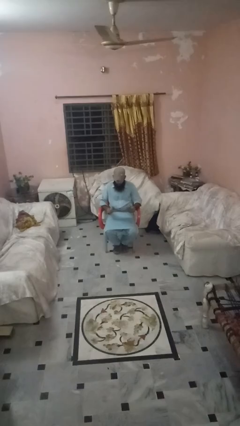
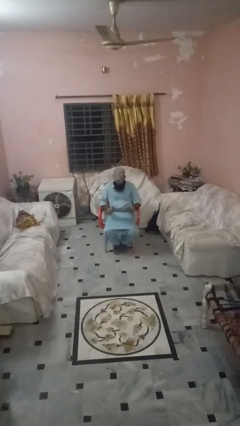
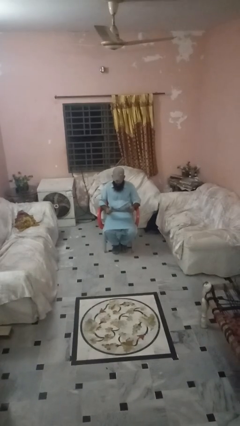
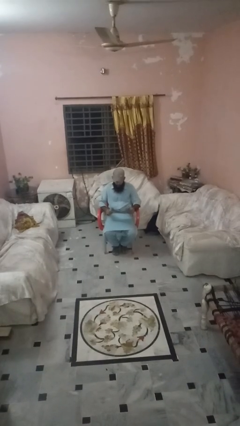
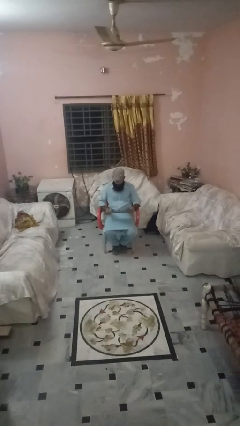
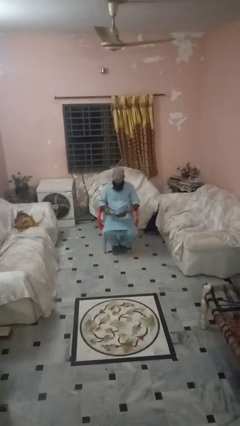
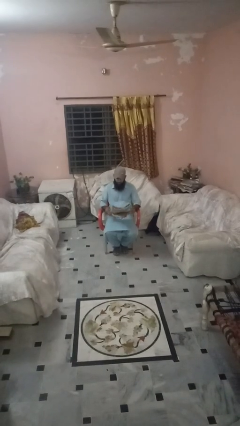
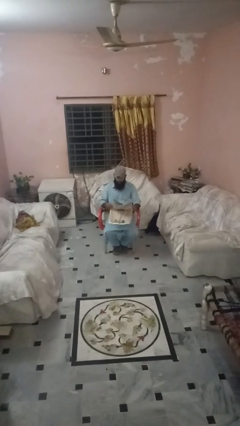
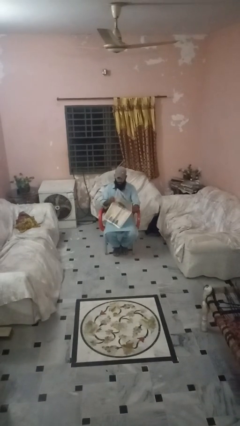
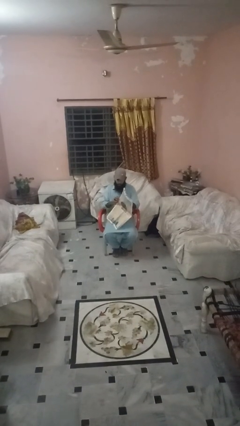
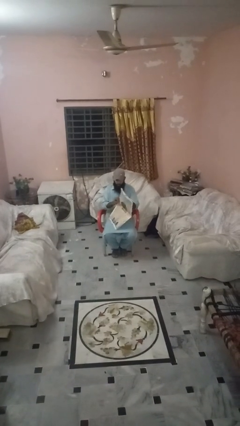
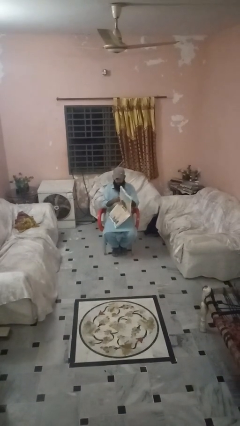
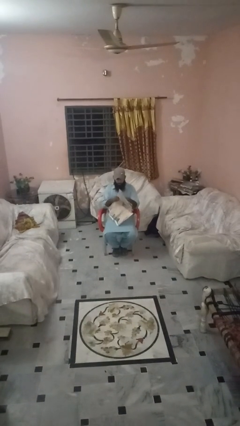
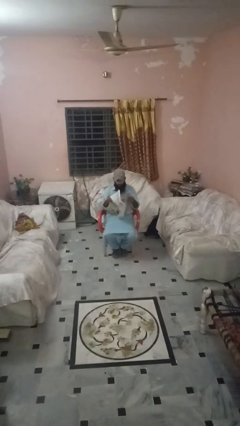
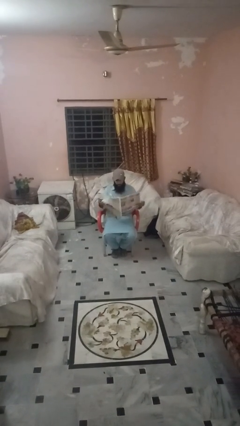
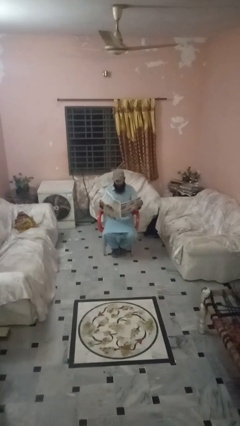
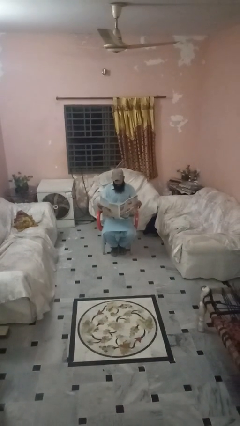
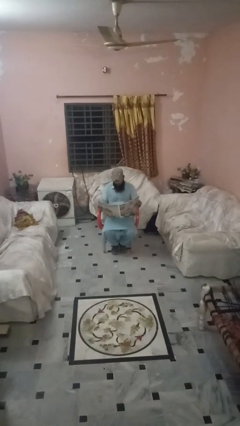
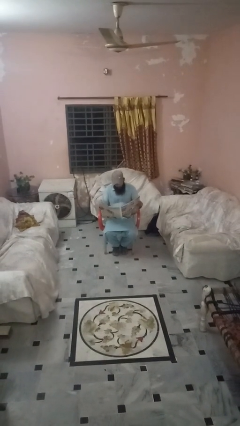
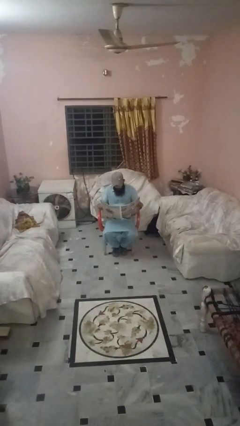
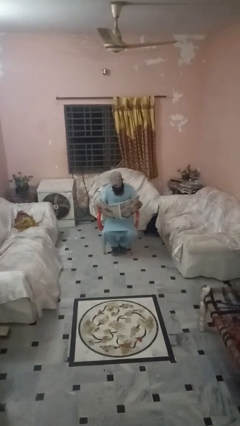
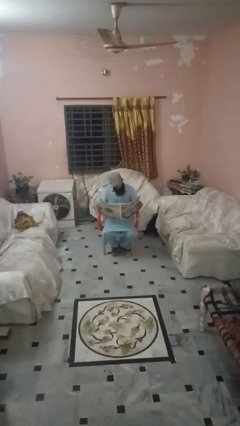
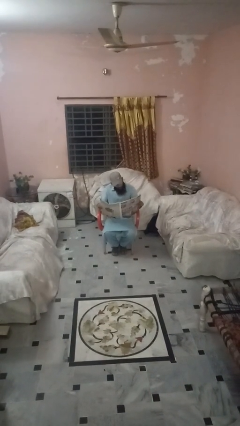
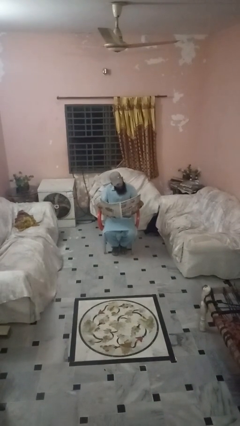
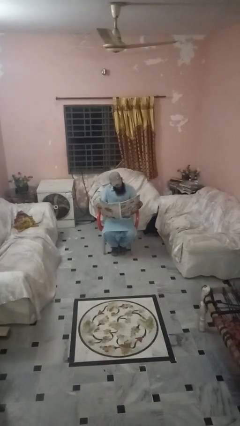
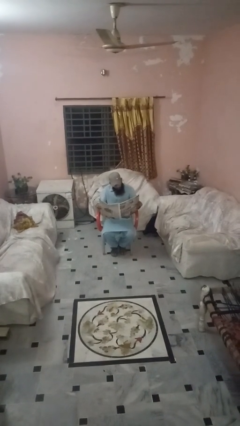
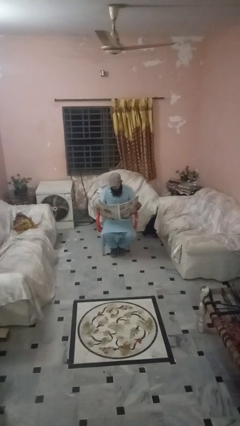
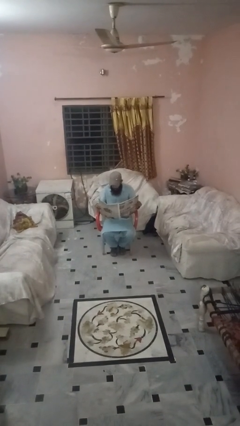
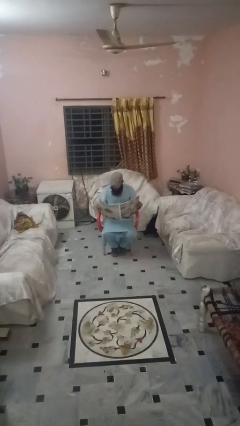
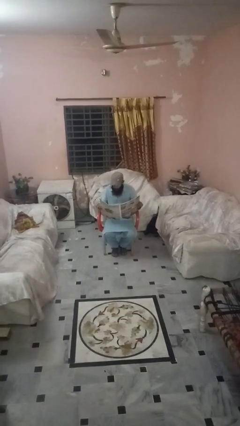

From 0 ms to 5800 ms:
person reads newspaper

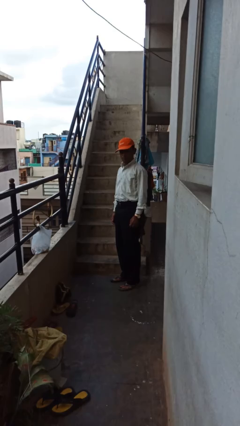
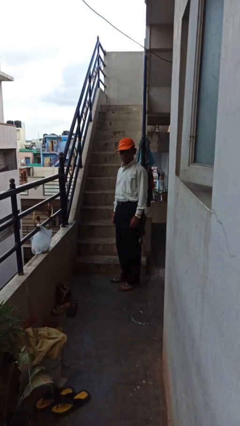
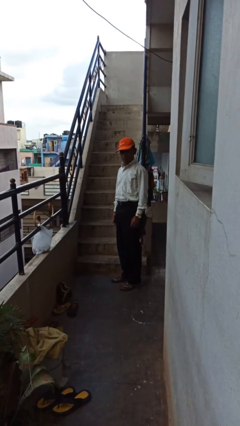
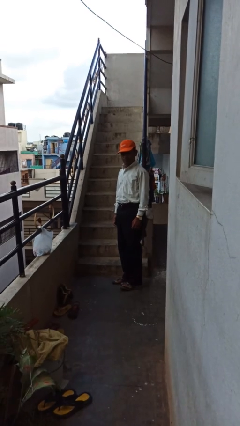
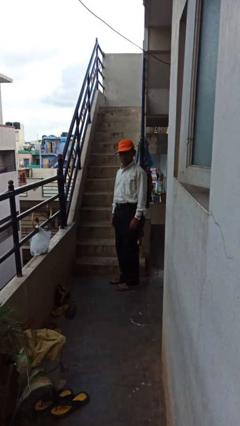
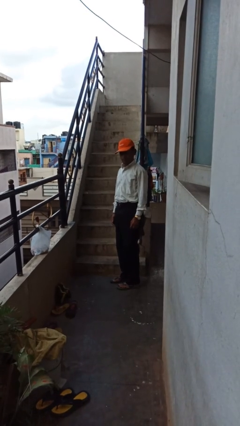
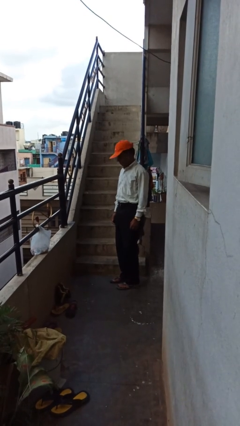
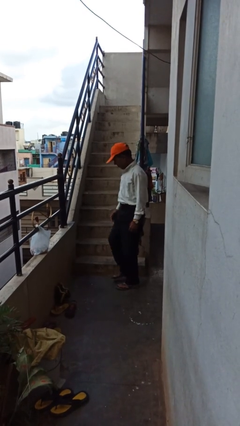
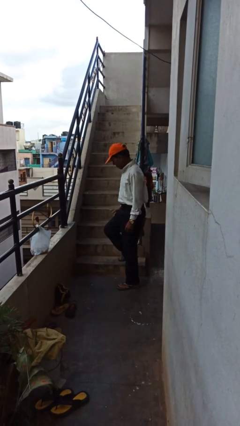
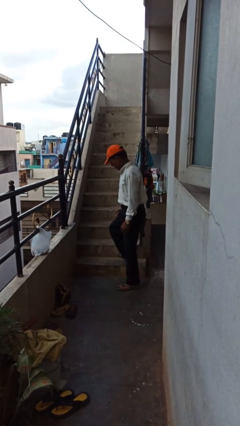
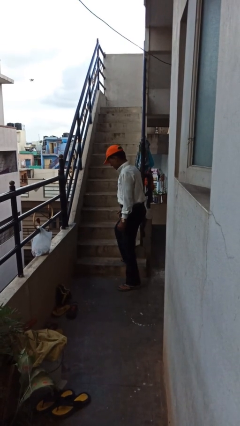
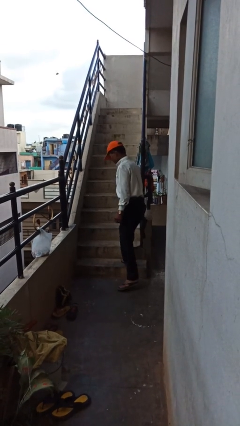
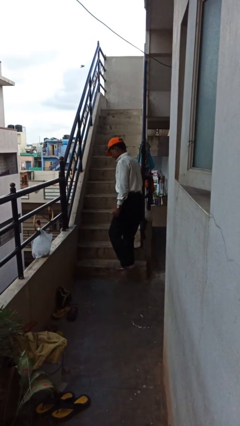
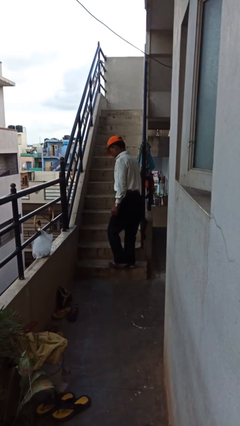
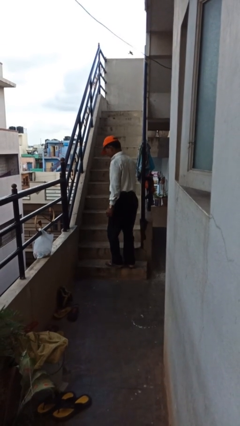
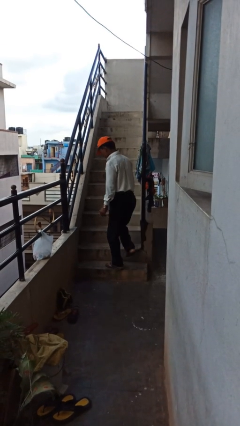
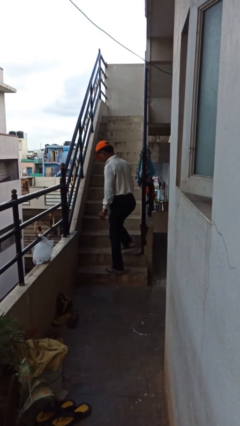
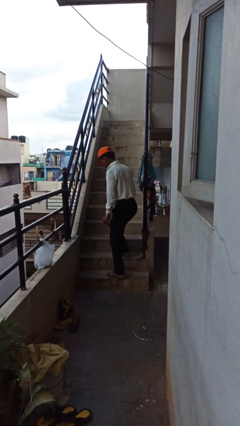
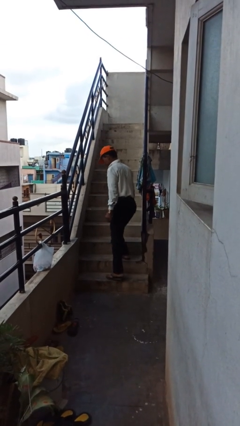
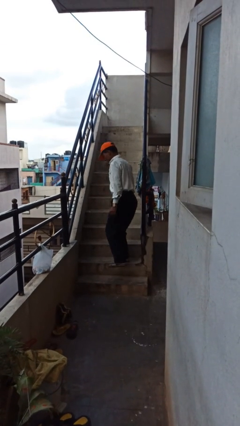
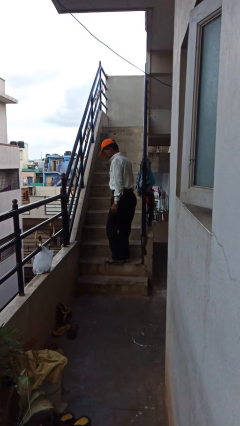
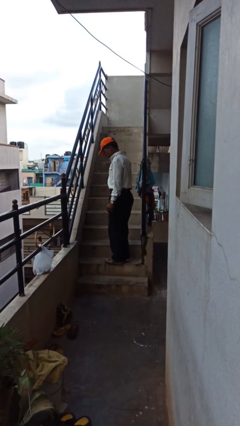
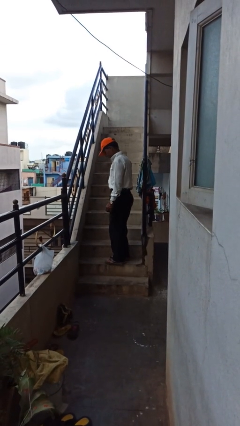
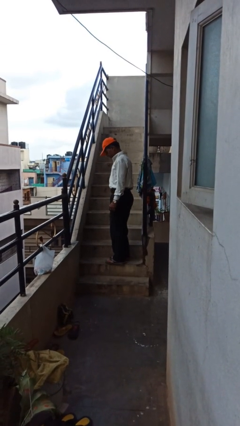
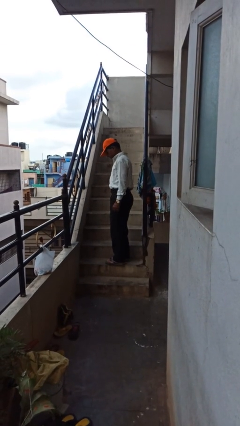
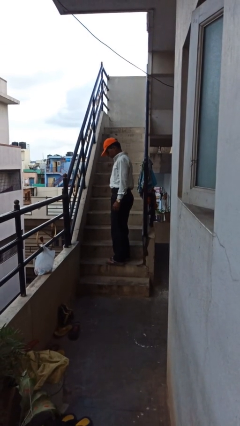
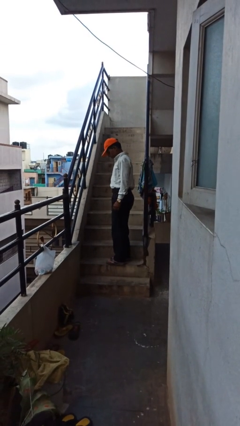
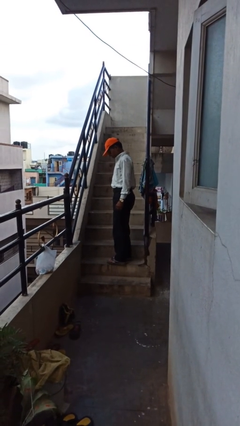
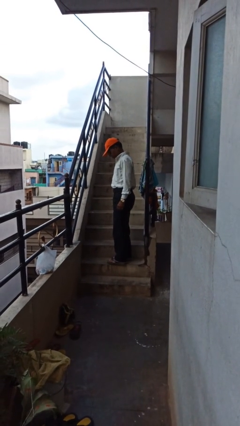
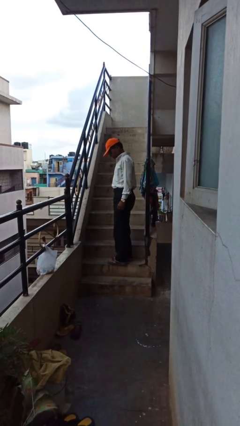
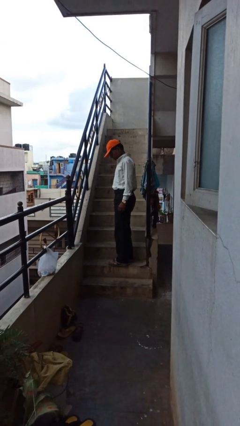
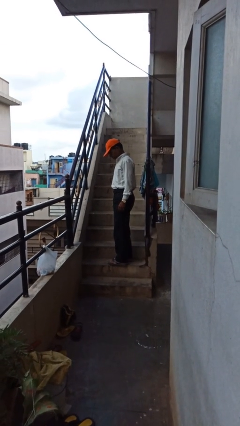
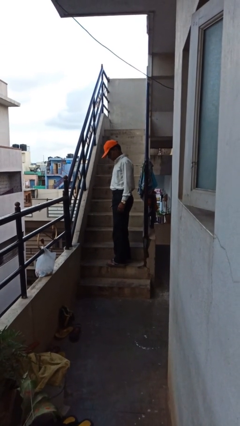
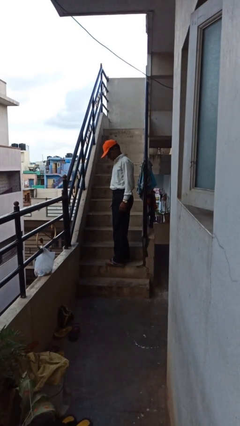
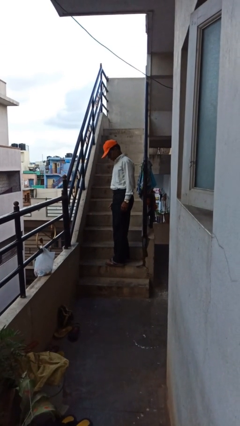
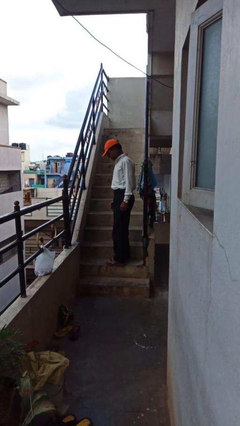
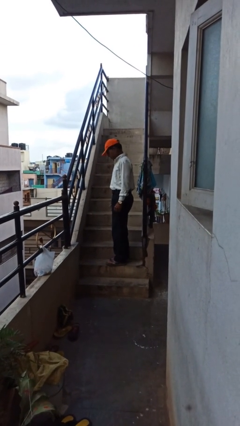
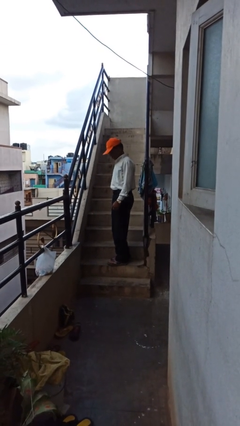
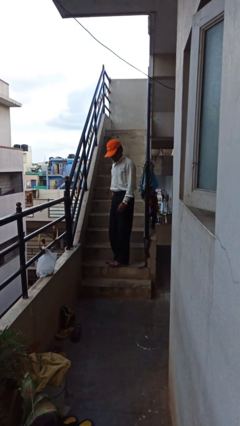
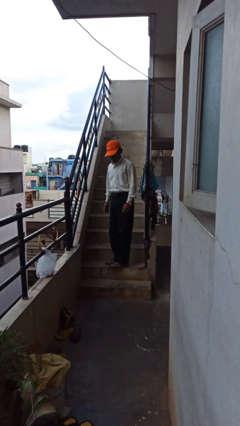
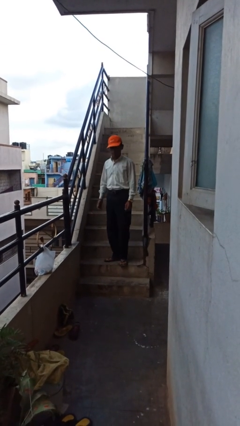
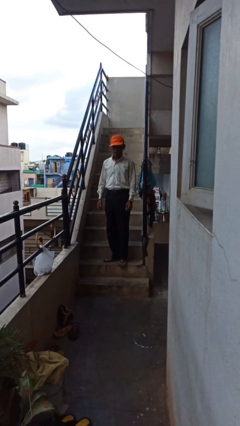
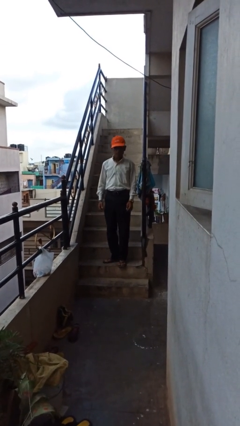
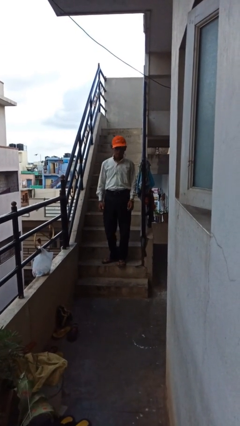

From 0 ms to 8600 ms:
person climbs up stairs

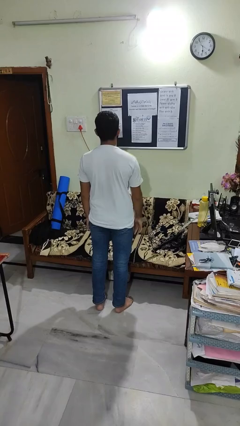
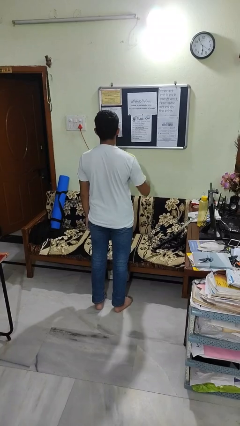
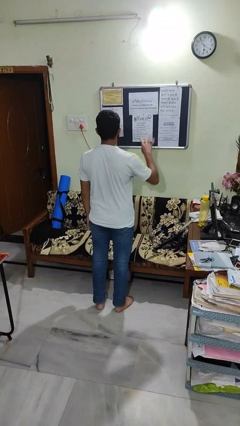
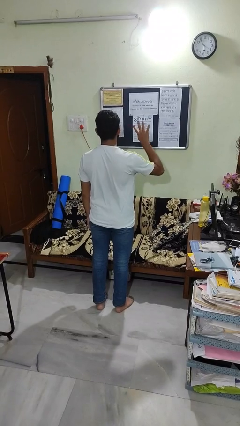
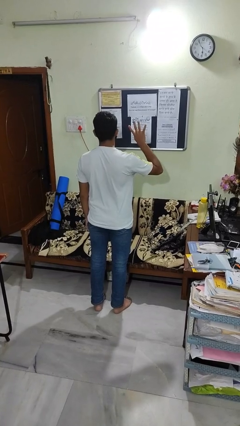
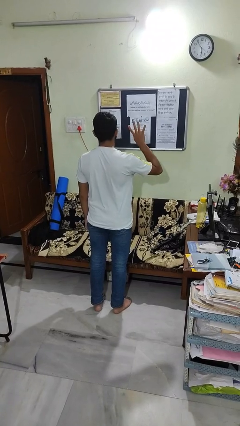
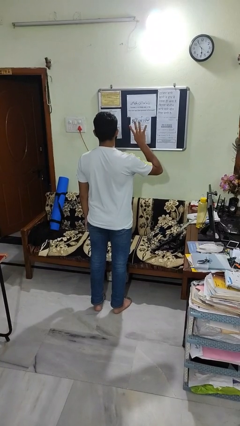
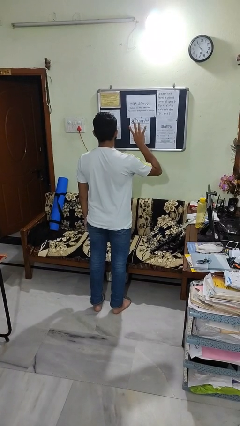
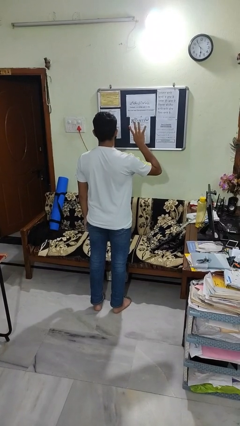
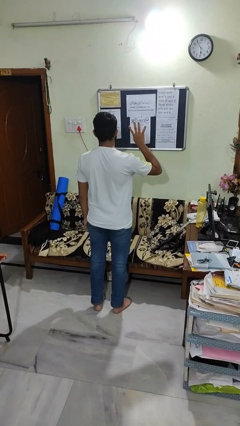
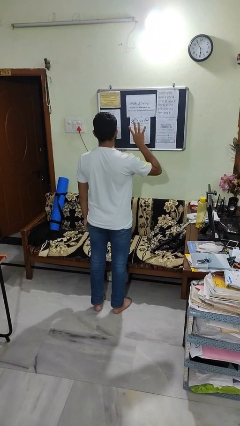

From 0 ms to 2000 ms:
person gestures number four

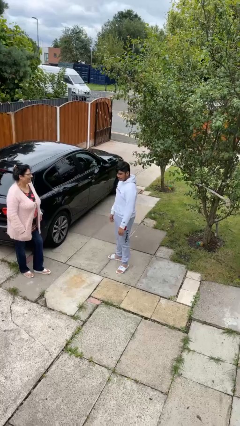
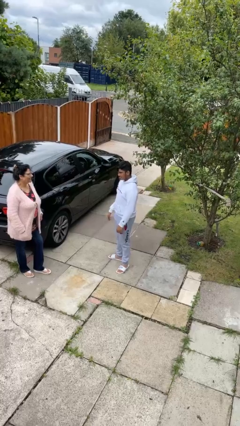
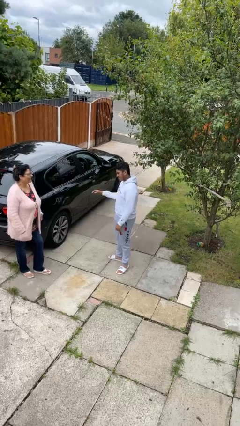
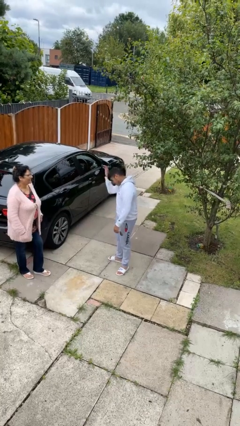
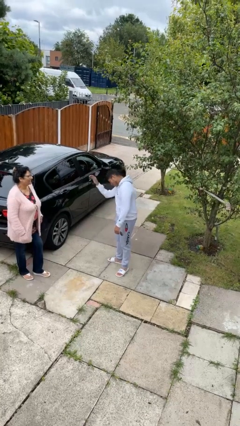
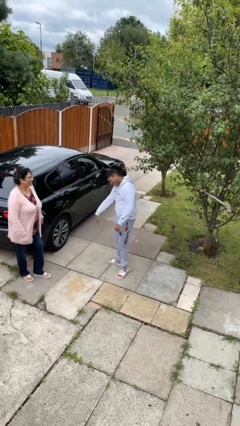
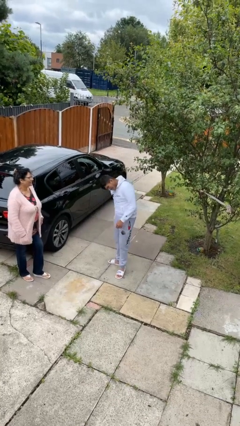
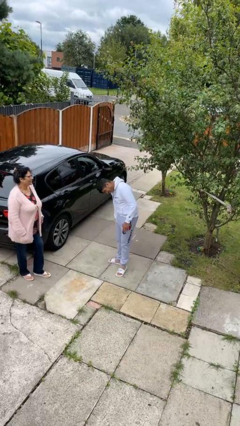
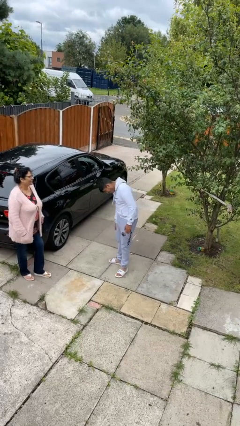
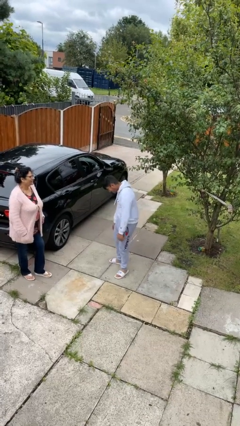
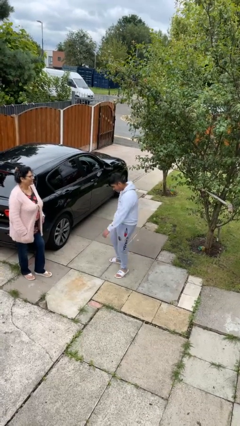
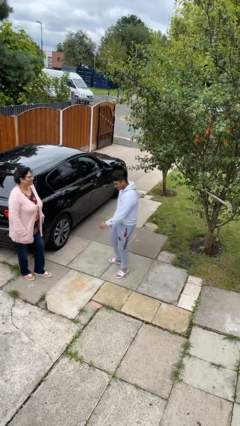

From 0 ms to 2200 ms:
person laughs with person
